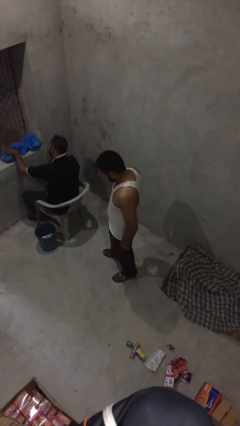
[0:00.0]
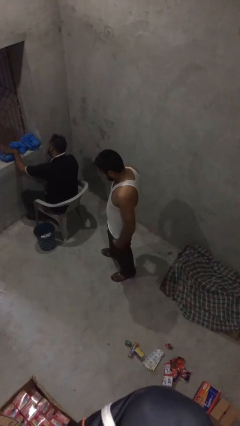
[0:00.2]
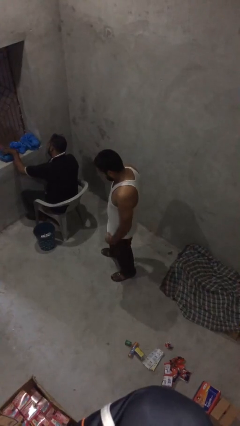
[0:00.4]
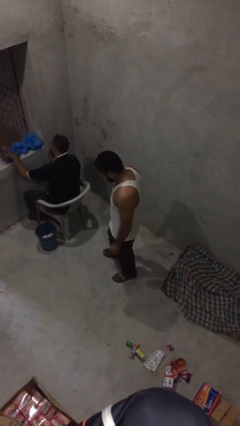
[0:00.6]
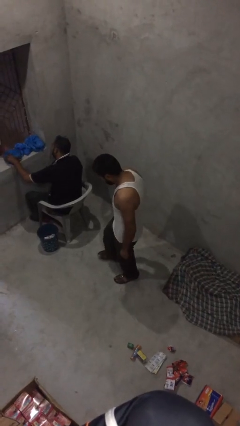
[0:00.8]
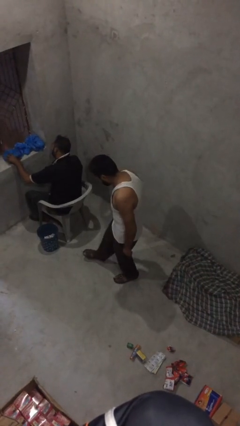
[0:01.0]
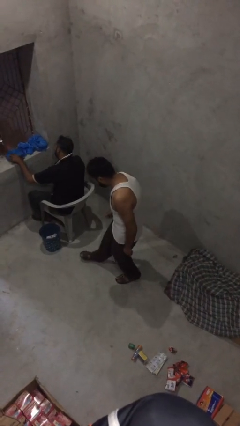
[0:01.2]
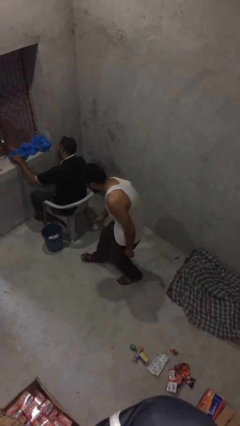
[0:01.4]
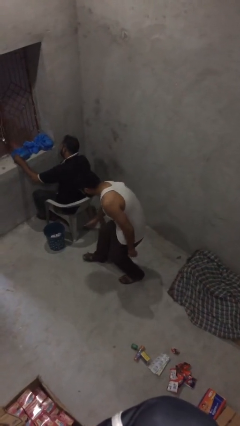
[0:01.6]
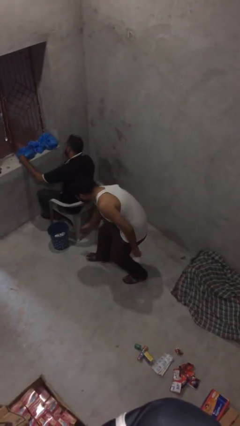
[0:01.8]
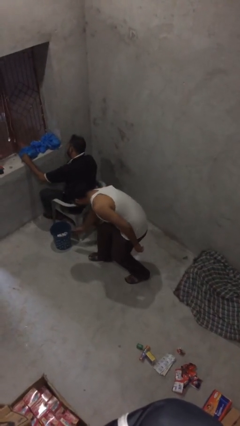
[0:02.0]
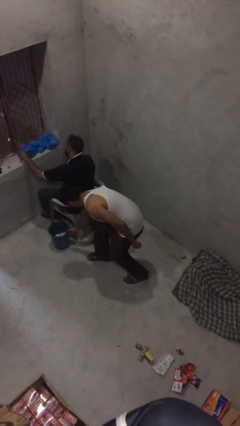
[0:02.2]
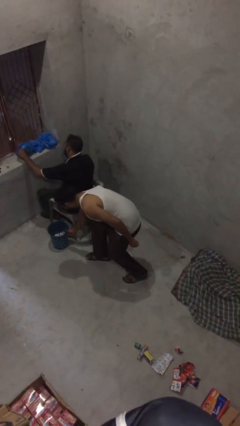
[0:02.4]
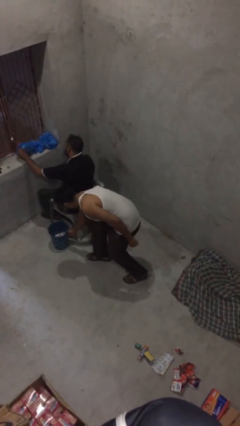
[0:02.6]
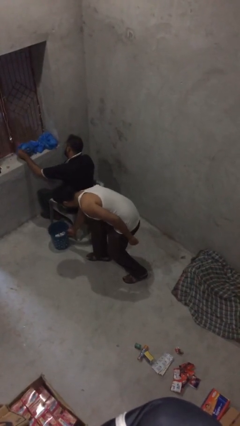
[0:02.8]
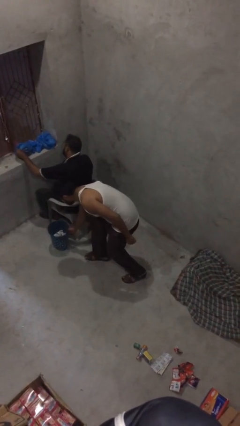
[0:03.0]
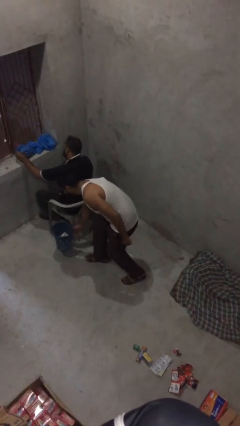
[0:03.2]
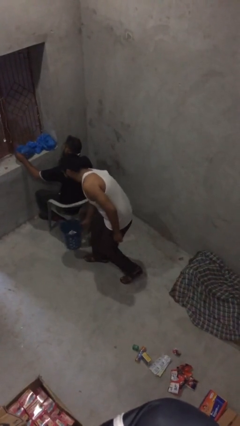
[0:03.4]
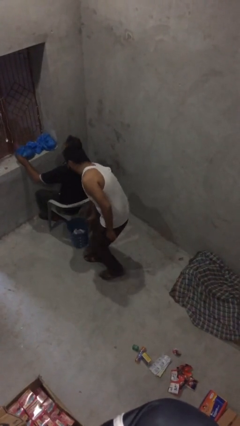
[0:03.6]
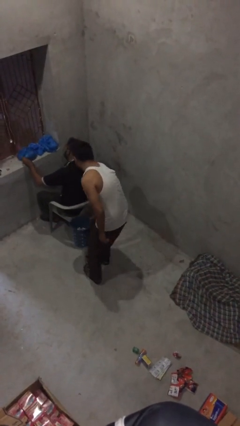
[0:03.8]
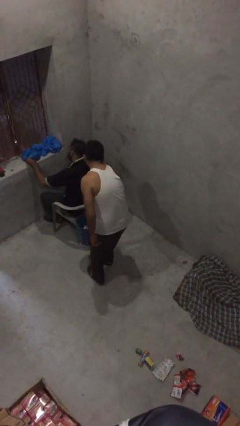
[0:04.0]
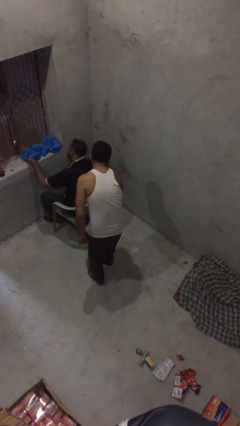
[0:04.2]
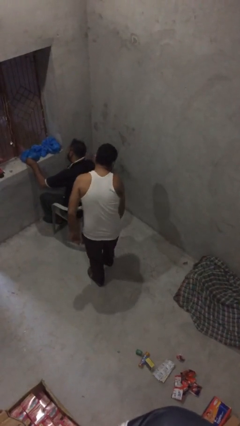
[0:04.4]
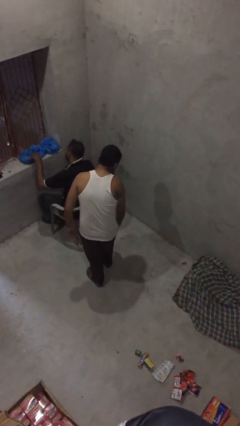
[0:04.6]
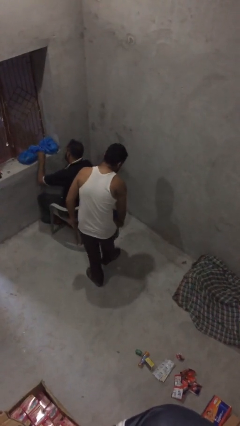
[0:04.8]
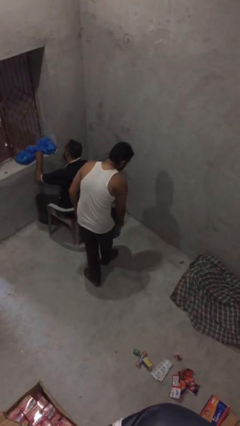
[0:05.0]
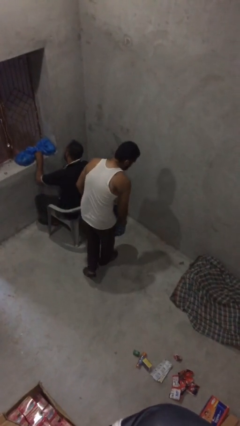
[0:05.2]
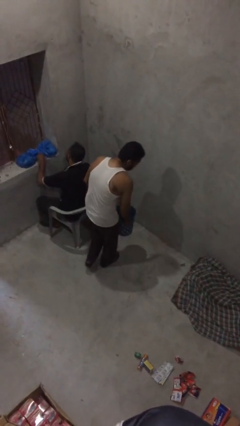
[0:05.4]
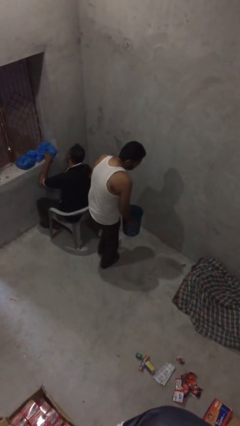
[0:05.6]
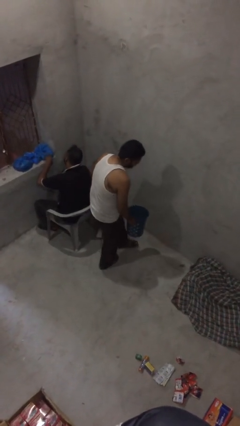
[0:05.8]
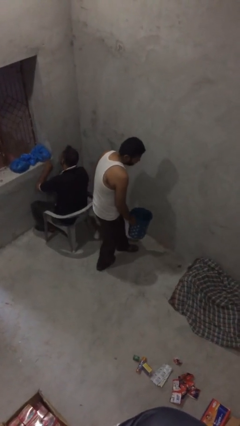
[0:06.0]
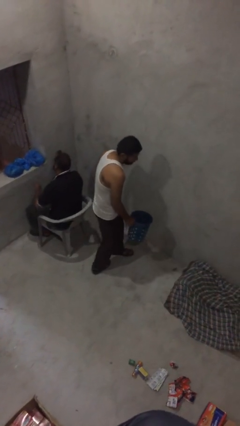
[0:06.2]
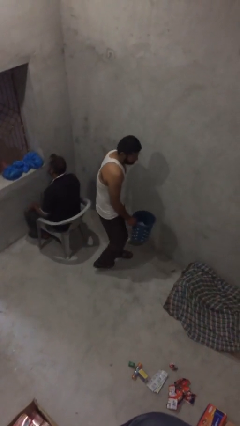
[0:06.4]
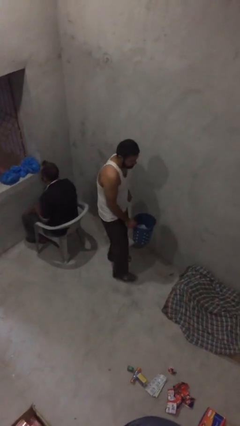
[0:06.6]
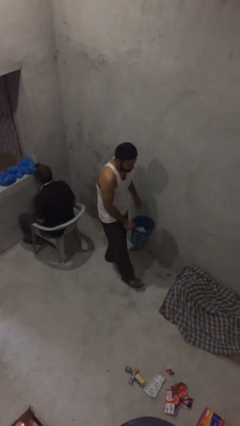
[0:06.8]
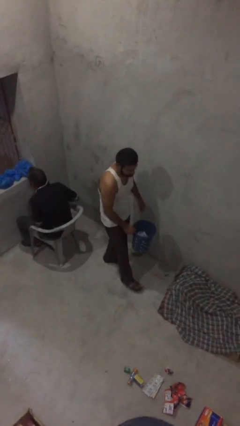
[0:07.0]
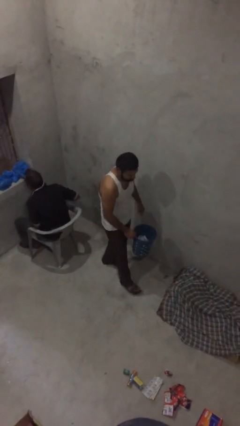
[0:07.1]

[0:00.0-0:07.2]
person steals object from person

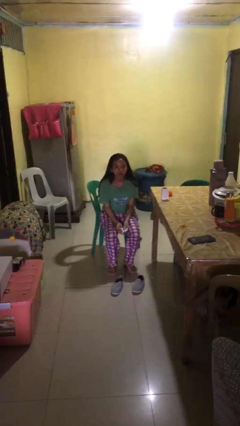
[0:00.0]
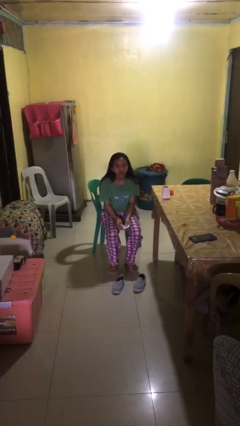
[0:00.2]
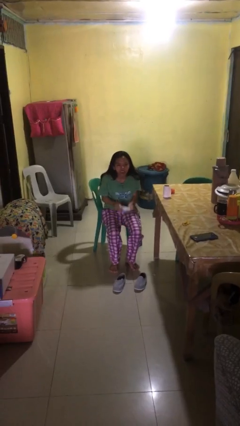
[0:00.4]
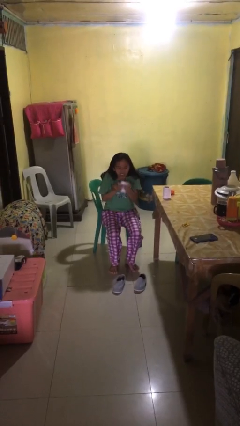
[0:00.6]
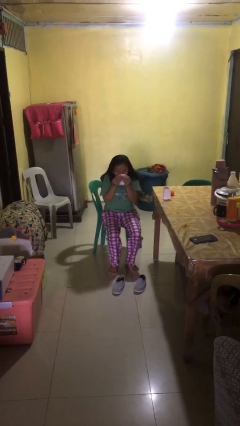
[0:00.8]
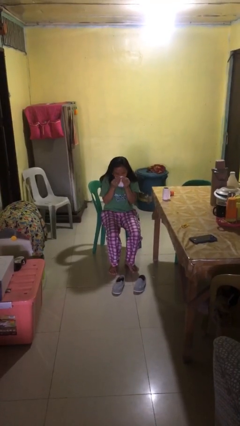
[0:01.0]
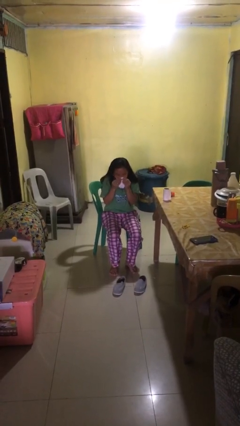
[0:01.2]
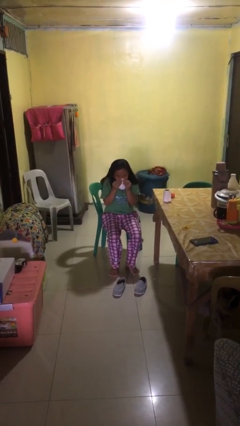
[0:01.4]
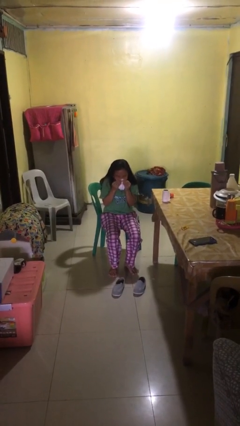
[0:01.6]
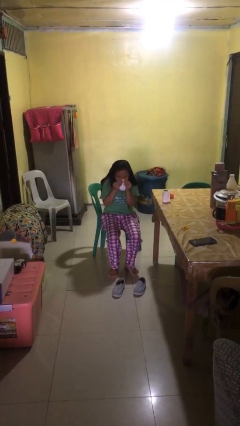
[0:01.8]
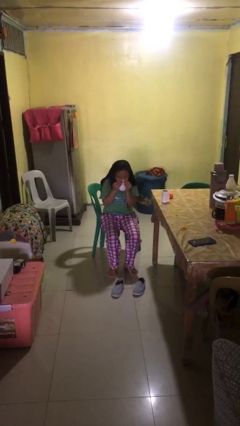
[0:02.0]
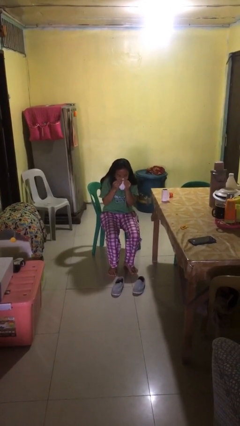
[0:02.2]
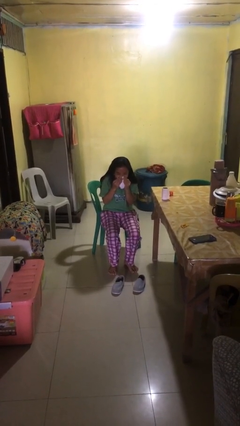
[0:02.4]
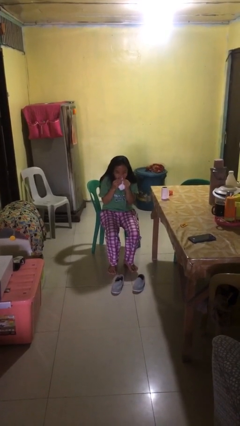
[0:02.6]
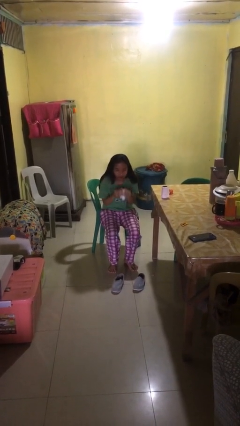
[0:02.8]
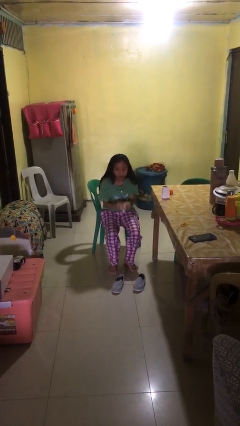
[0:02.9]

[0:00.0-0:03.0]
person blows nose

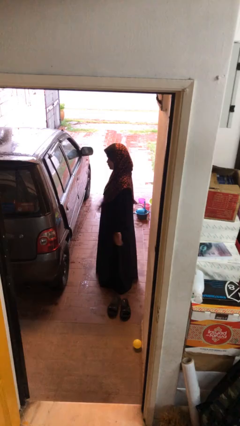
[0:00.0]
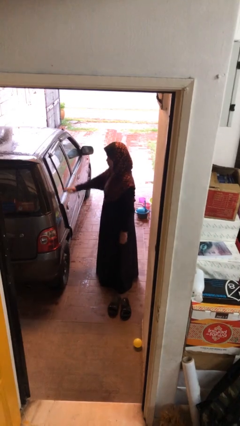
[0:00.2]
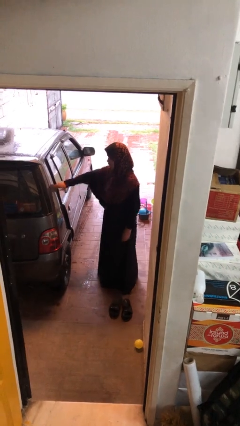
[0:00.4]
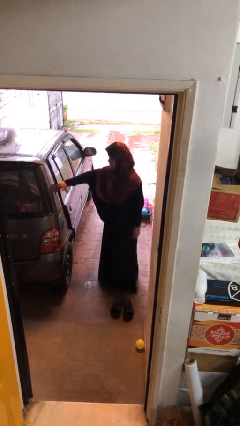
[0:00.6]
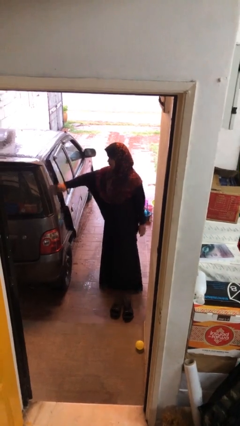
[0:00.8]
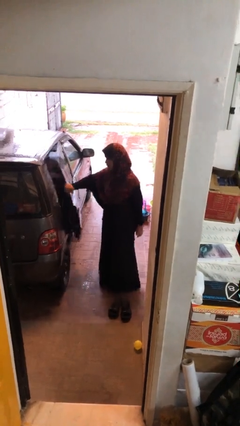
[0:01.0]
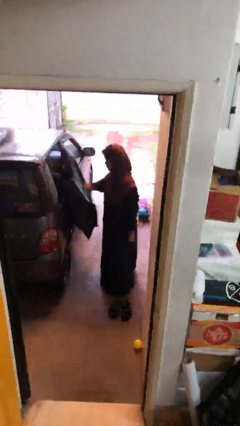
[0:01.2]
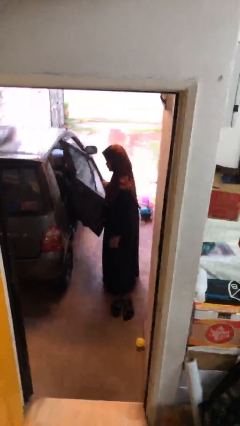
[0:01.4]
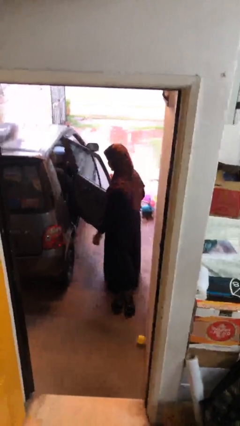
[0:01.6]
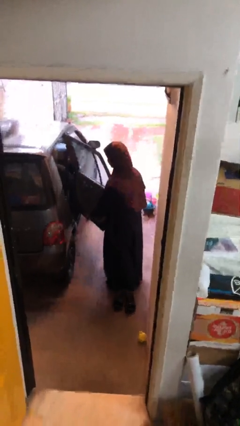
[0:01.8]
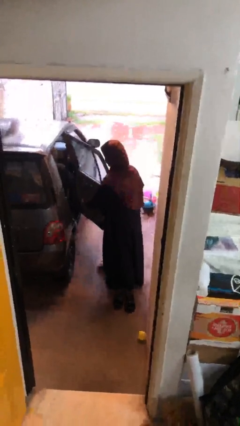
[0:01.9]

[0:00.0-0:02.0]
person opens car door

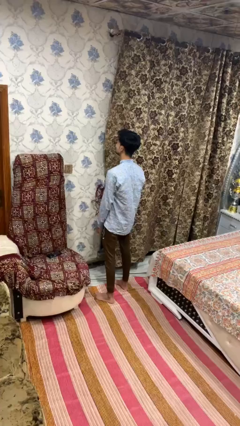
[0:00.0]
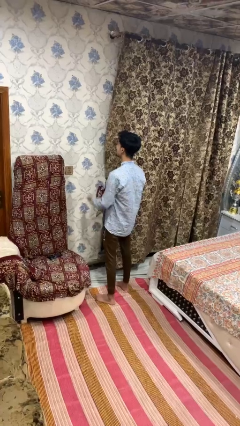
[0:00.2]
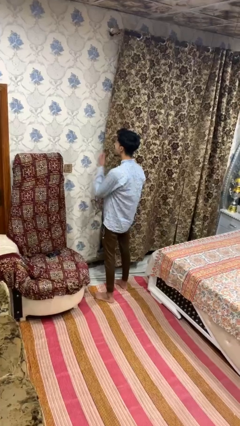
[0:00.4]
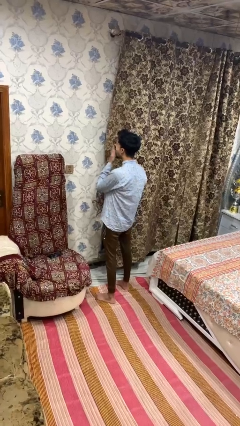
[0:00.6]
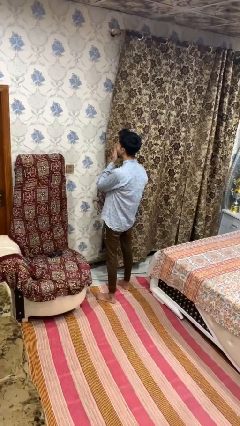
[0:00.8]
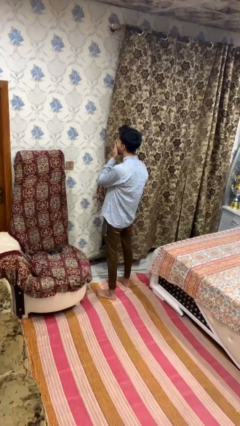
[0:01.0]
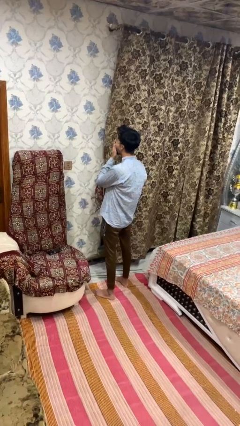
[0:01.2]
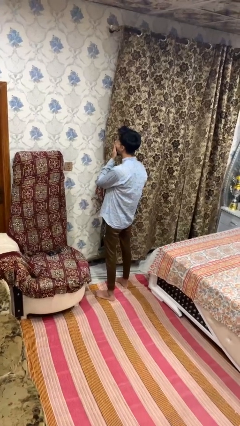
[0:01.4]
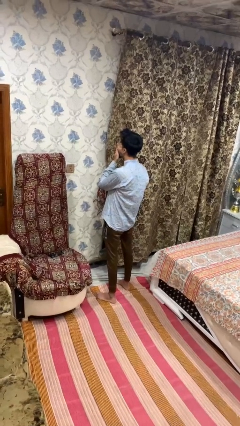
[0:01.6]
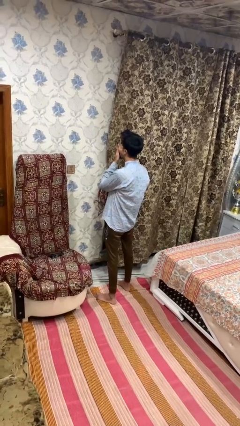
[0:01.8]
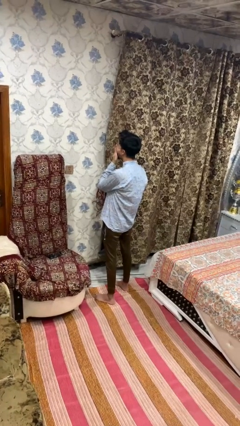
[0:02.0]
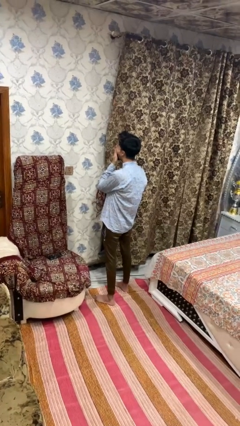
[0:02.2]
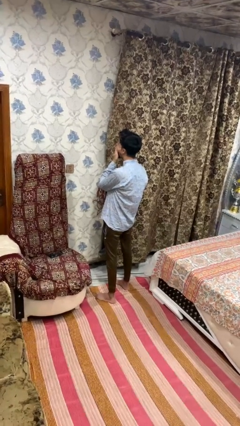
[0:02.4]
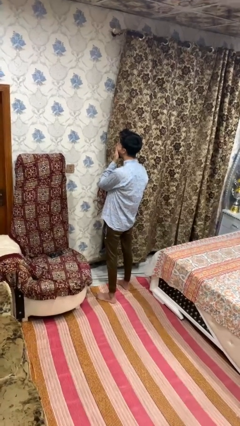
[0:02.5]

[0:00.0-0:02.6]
person yawns

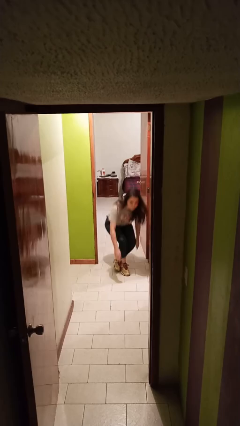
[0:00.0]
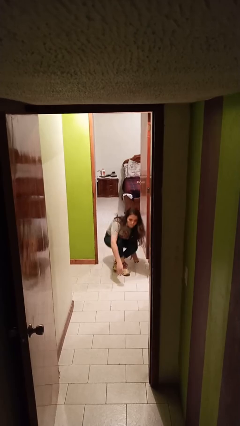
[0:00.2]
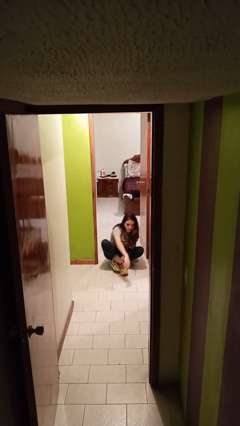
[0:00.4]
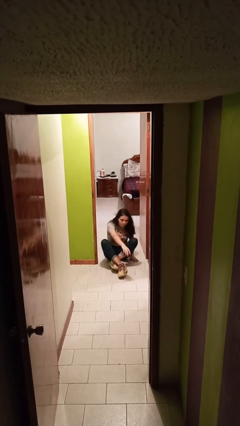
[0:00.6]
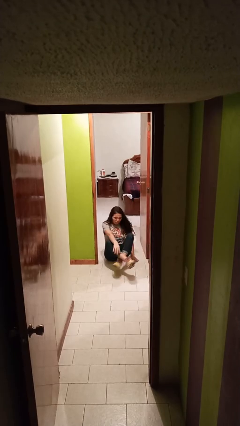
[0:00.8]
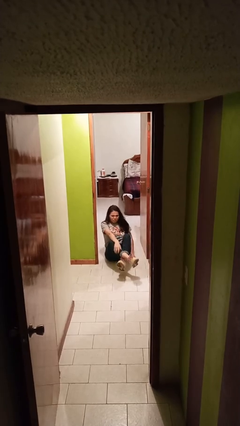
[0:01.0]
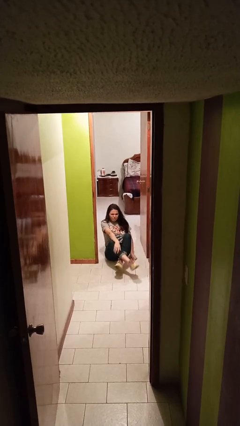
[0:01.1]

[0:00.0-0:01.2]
person sits down

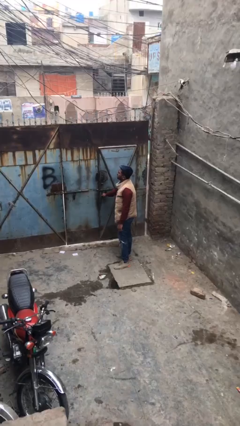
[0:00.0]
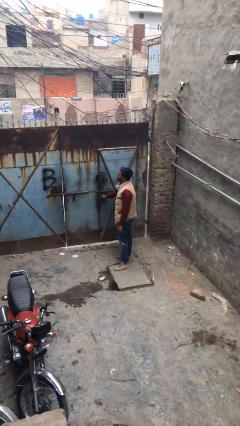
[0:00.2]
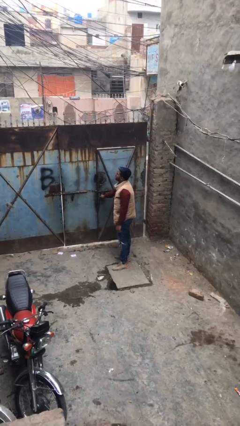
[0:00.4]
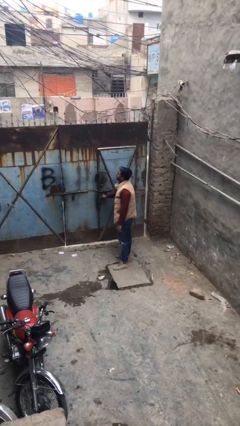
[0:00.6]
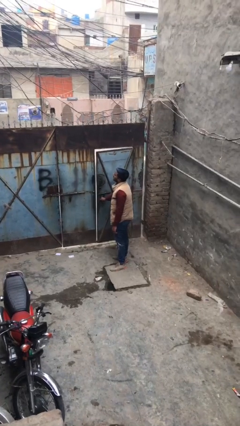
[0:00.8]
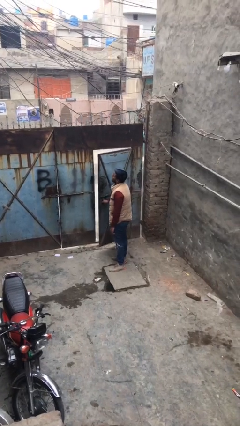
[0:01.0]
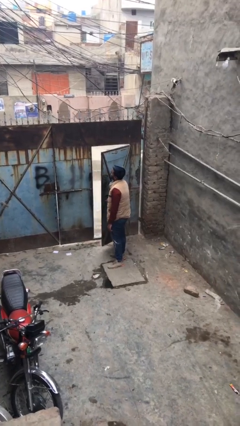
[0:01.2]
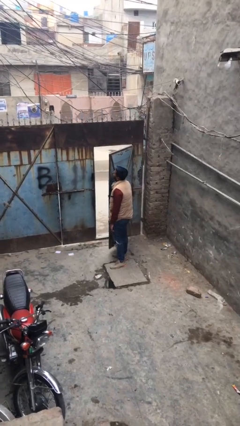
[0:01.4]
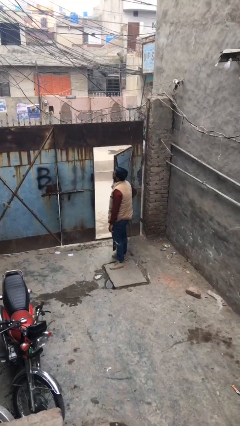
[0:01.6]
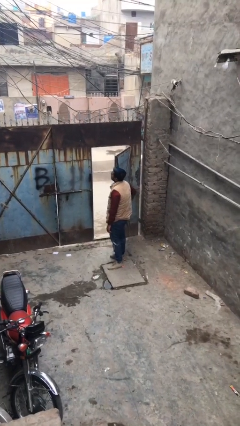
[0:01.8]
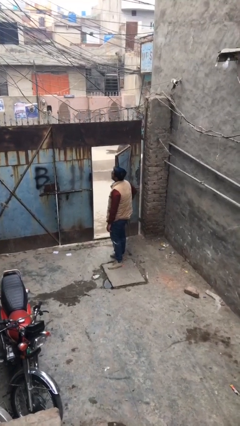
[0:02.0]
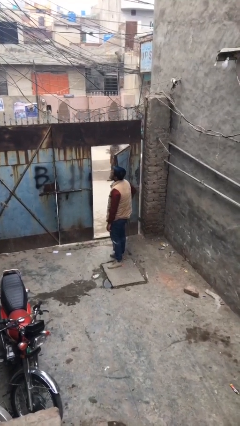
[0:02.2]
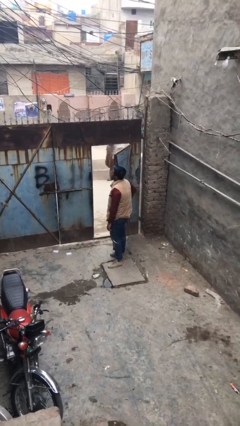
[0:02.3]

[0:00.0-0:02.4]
person opens facility door
